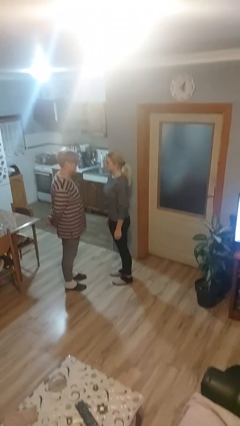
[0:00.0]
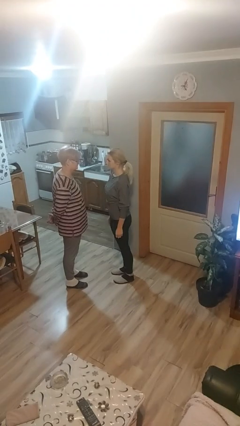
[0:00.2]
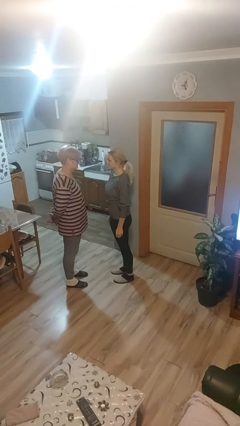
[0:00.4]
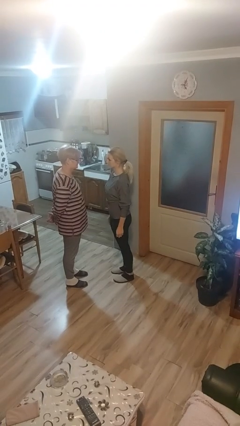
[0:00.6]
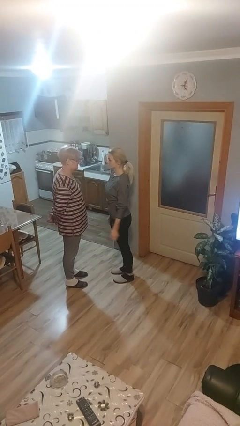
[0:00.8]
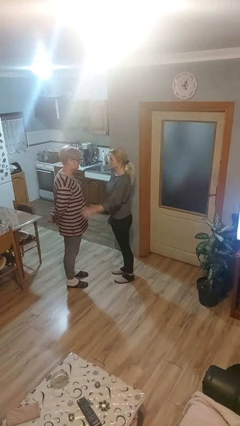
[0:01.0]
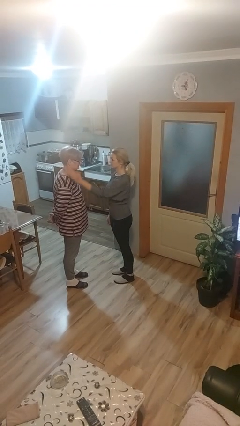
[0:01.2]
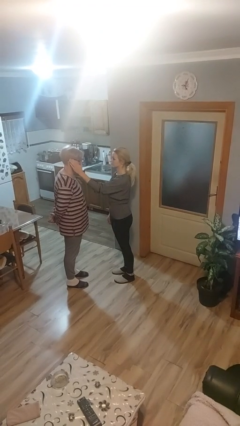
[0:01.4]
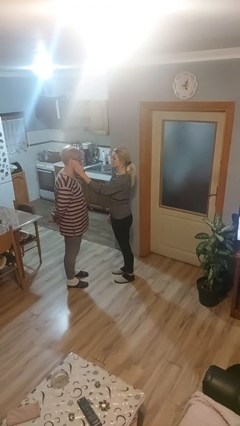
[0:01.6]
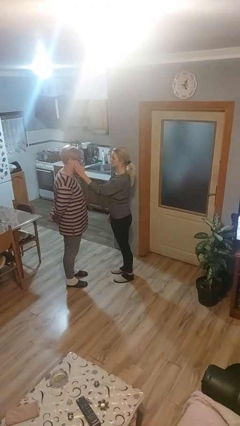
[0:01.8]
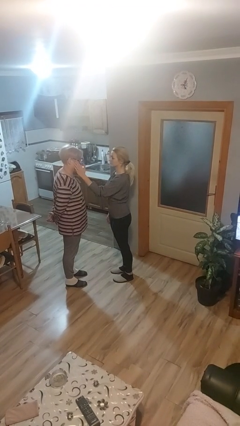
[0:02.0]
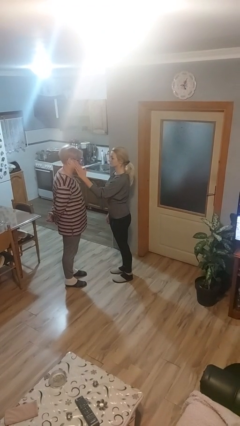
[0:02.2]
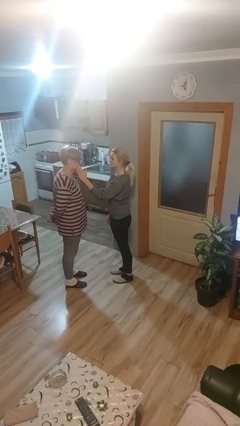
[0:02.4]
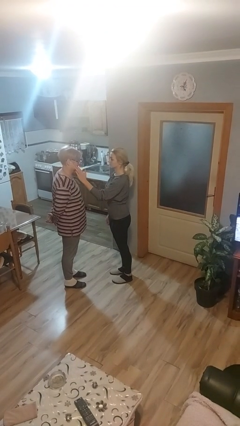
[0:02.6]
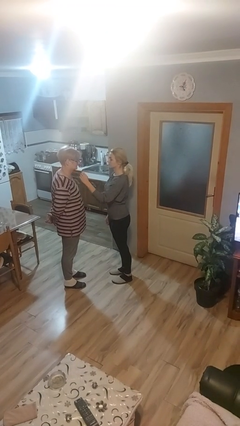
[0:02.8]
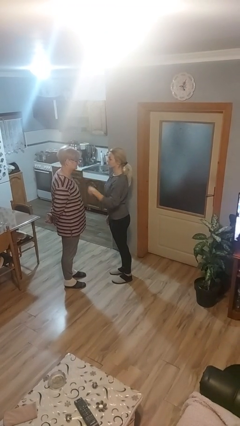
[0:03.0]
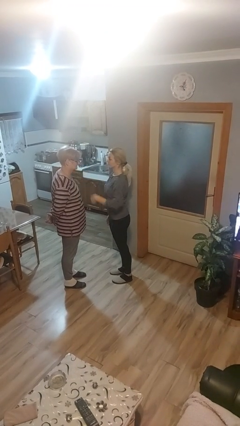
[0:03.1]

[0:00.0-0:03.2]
person touches face of person

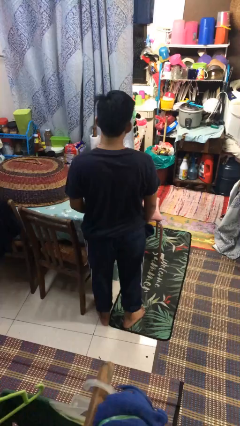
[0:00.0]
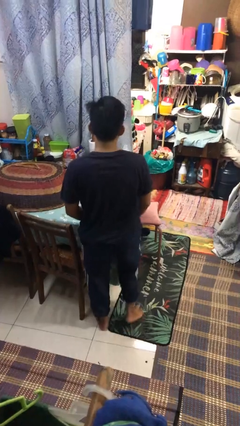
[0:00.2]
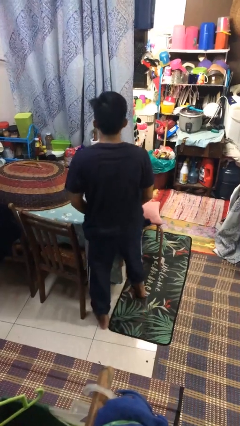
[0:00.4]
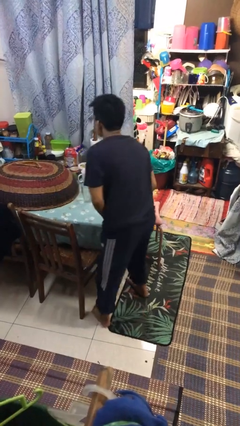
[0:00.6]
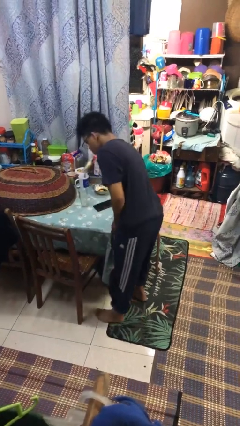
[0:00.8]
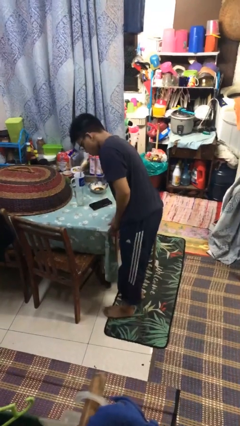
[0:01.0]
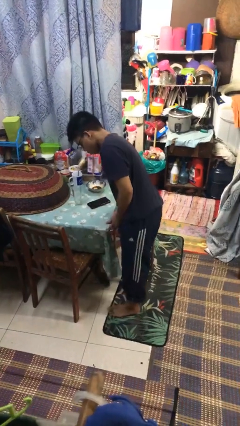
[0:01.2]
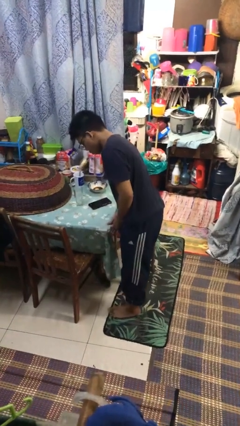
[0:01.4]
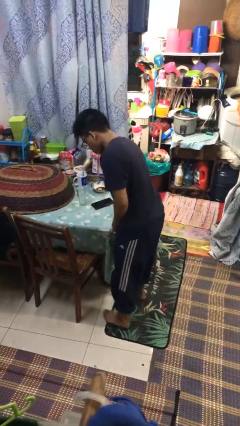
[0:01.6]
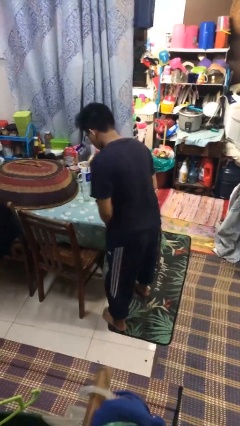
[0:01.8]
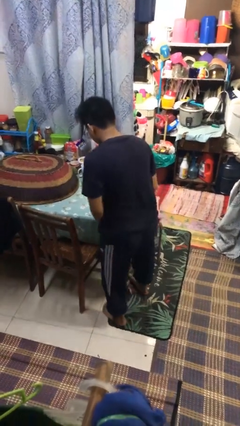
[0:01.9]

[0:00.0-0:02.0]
person bumps into table

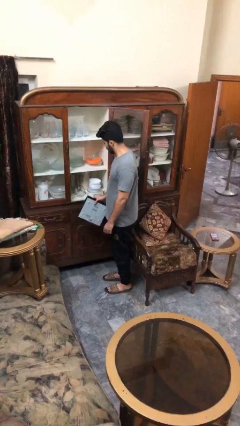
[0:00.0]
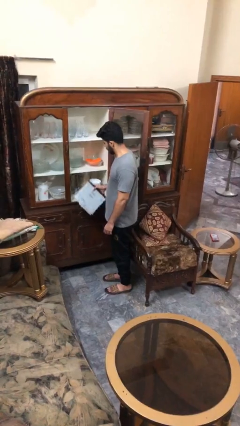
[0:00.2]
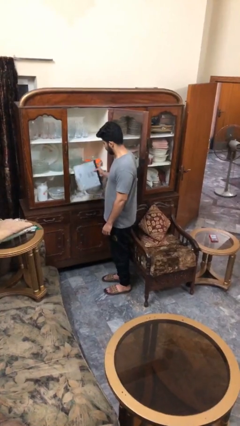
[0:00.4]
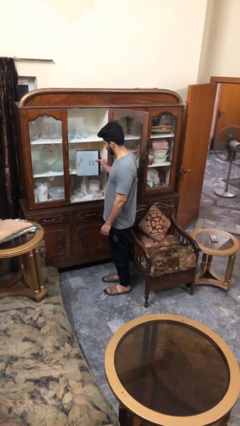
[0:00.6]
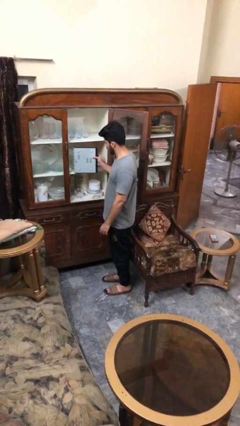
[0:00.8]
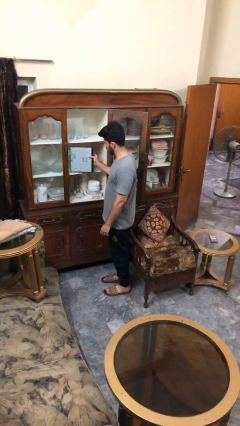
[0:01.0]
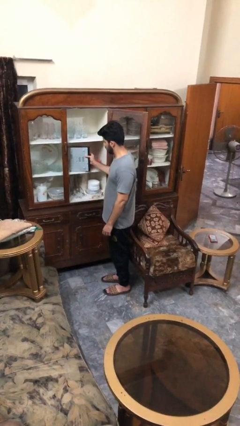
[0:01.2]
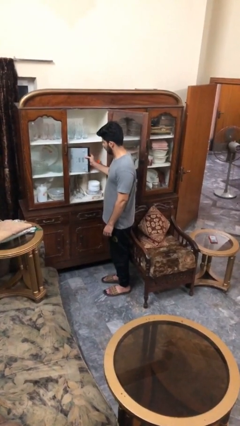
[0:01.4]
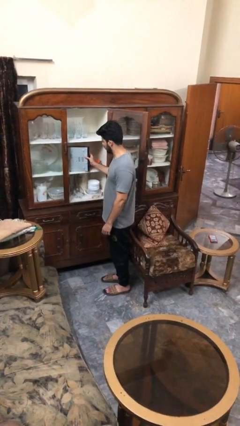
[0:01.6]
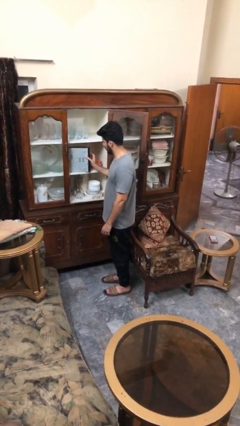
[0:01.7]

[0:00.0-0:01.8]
person puts down object into cabinet

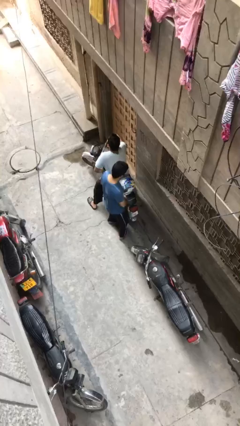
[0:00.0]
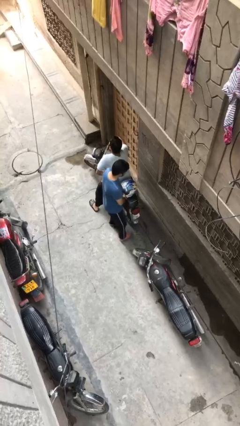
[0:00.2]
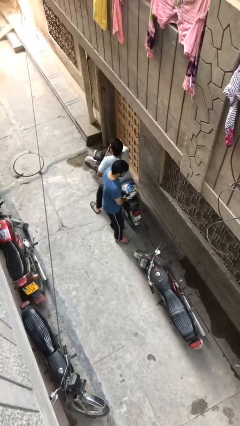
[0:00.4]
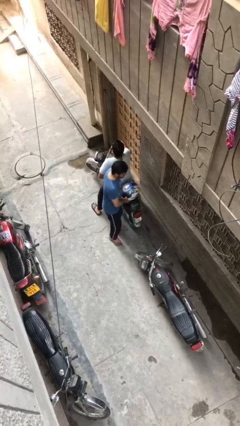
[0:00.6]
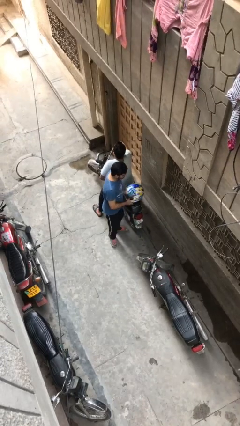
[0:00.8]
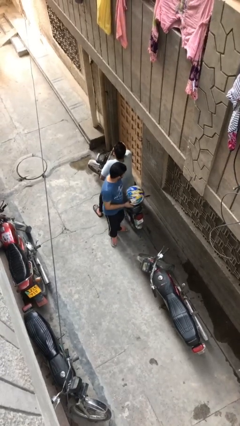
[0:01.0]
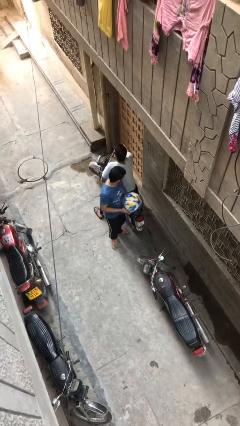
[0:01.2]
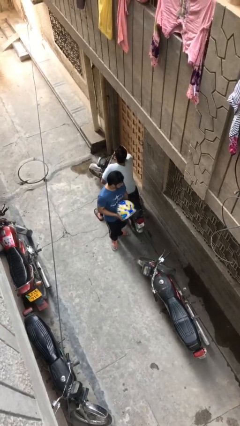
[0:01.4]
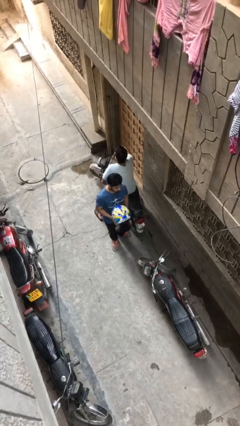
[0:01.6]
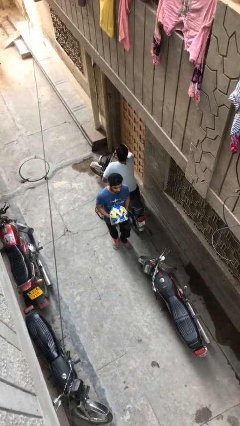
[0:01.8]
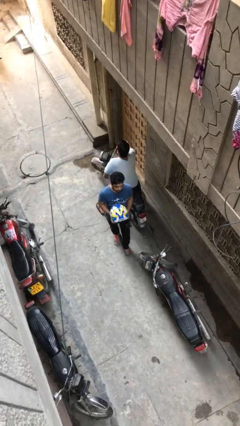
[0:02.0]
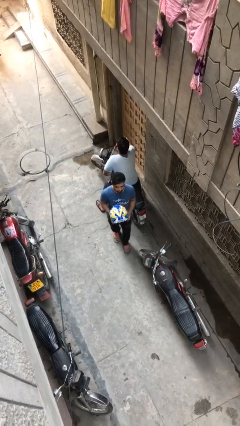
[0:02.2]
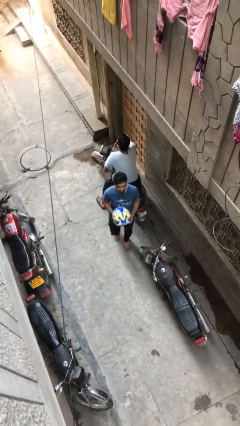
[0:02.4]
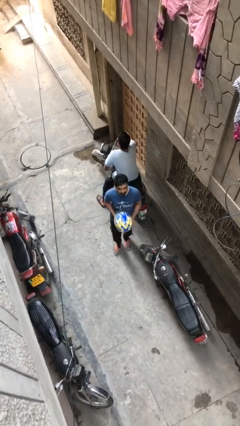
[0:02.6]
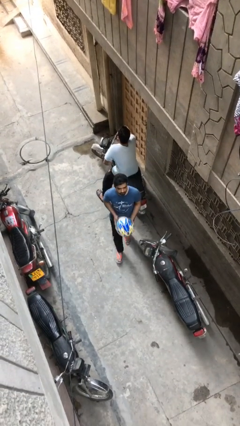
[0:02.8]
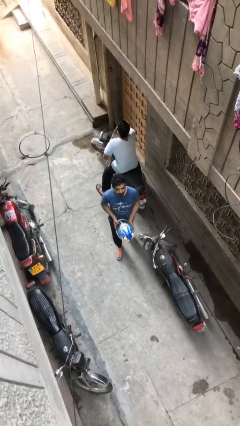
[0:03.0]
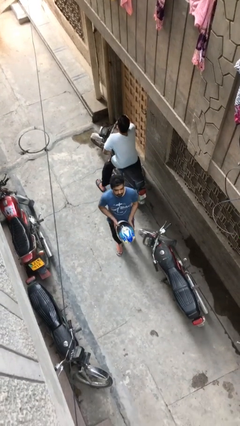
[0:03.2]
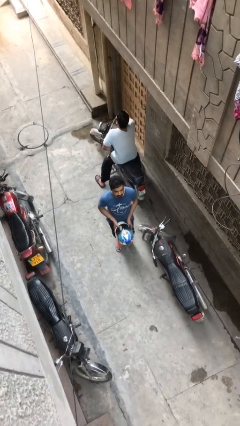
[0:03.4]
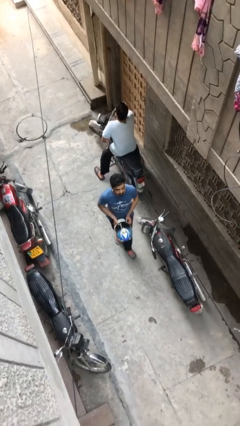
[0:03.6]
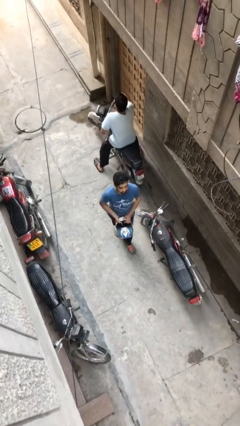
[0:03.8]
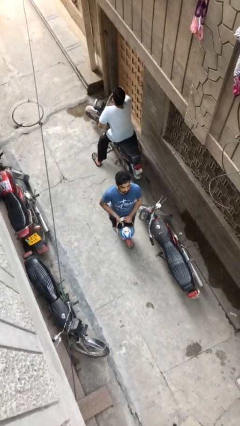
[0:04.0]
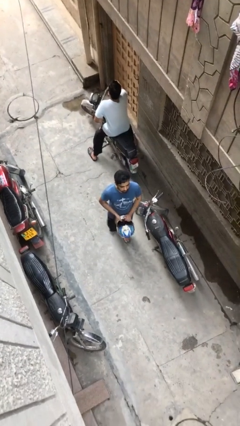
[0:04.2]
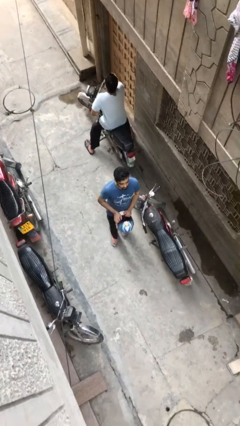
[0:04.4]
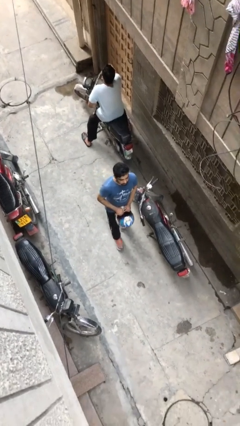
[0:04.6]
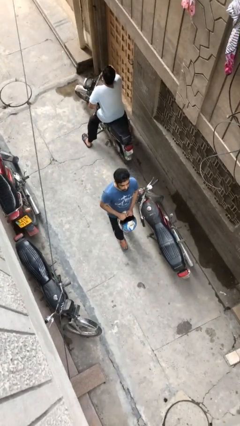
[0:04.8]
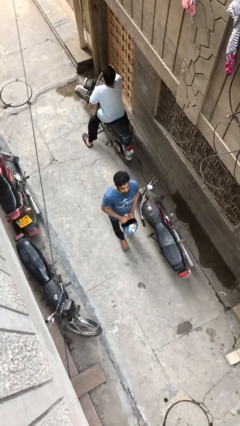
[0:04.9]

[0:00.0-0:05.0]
person steals object from person

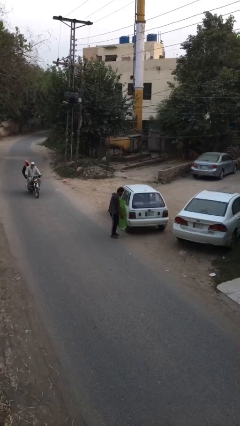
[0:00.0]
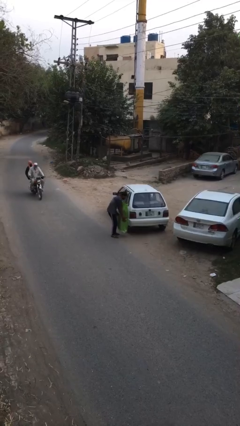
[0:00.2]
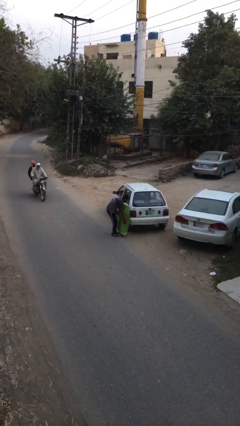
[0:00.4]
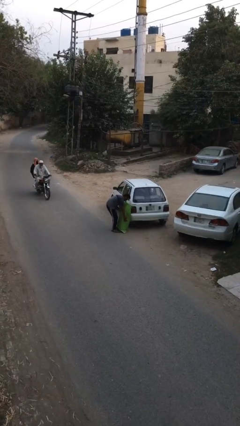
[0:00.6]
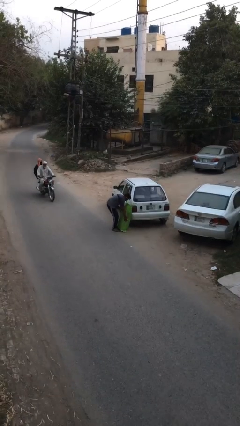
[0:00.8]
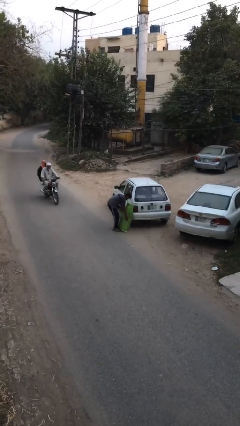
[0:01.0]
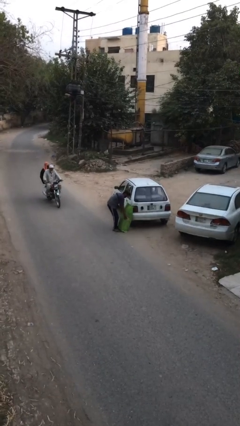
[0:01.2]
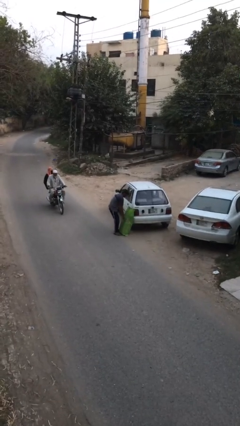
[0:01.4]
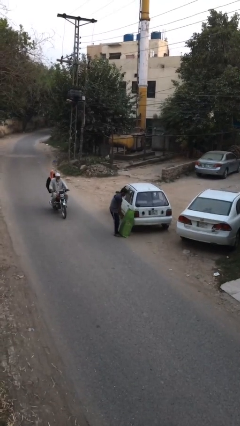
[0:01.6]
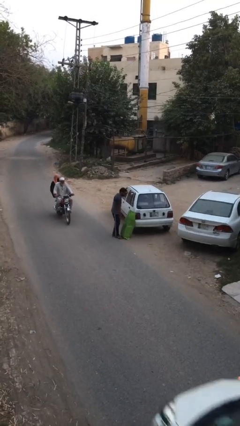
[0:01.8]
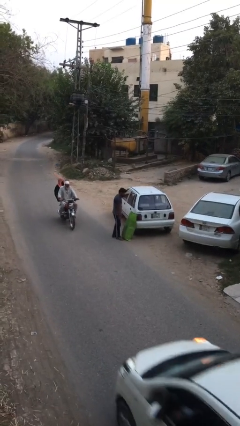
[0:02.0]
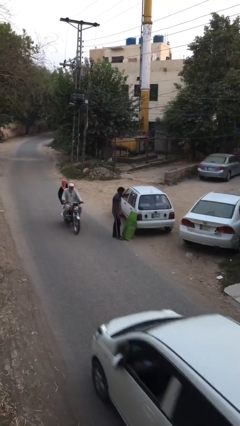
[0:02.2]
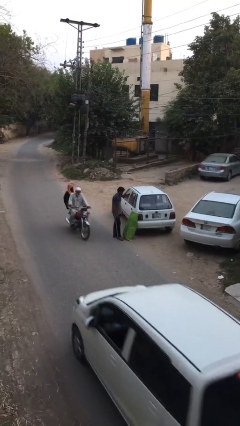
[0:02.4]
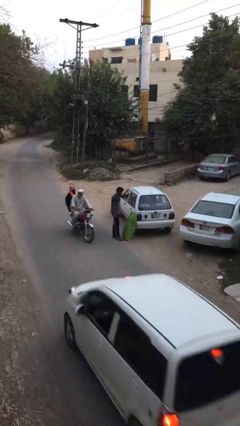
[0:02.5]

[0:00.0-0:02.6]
person puts down object on floor

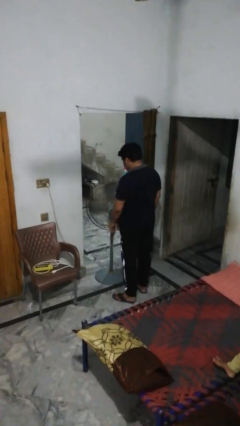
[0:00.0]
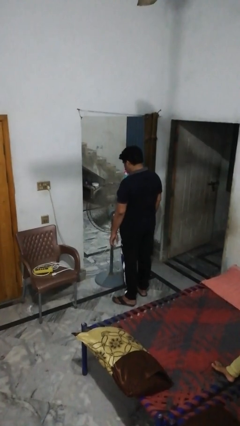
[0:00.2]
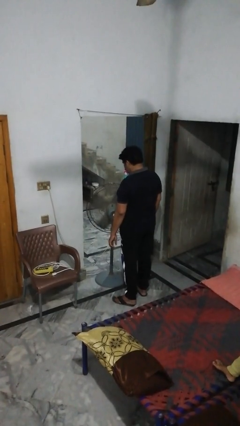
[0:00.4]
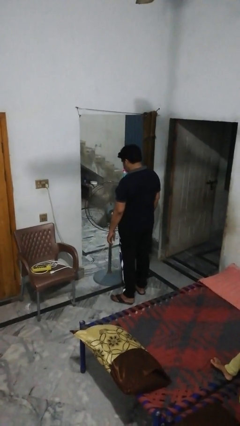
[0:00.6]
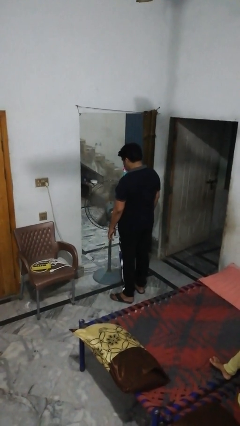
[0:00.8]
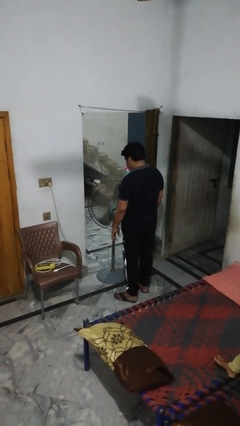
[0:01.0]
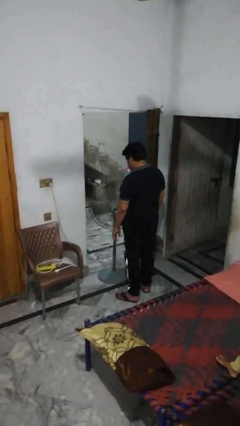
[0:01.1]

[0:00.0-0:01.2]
person turns off fan

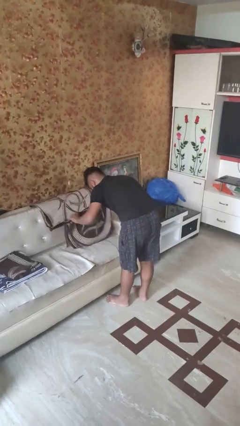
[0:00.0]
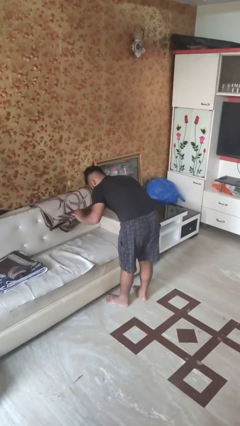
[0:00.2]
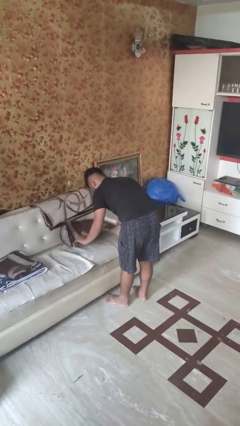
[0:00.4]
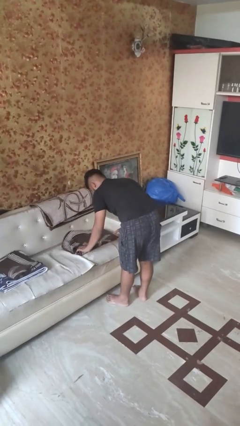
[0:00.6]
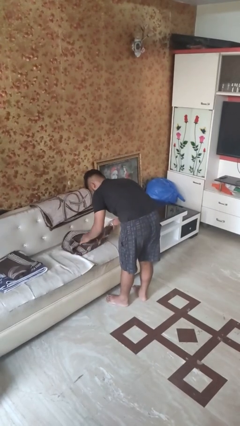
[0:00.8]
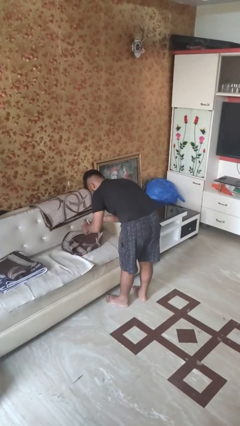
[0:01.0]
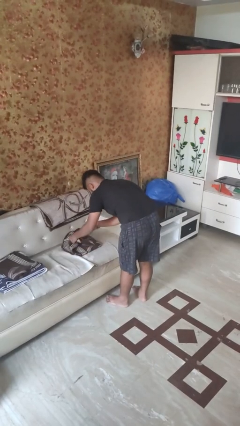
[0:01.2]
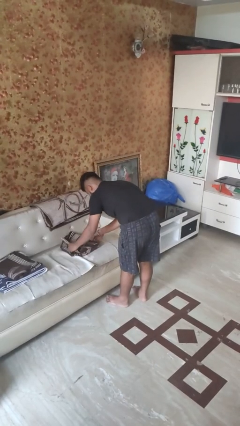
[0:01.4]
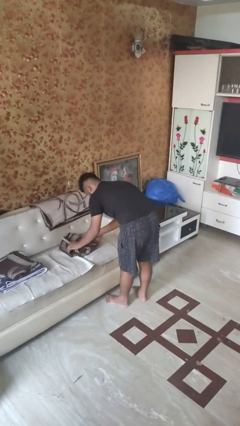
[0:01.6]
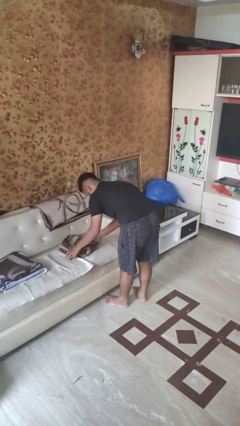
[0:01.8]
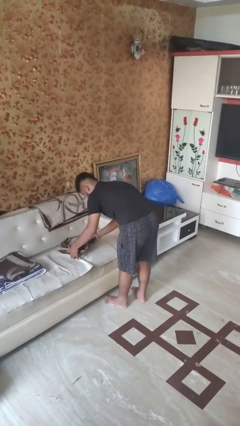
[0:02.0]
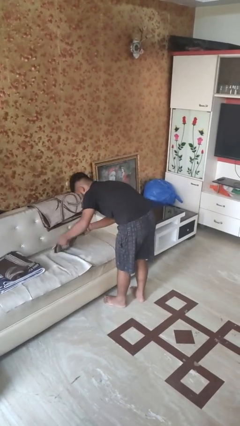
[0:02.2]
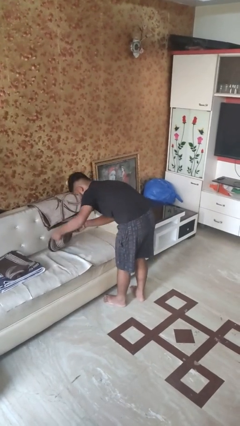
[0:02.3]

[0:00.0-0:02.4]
person folds towel
